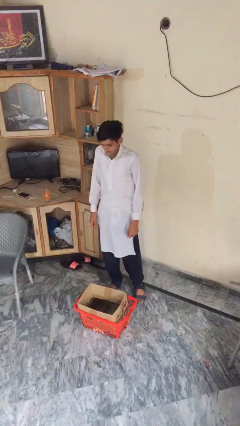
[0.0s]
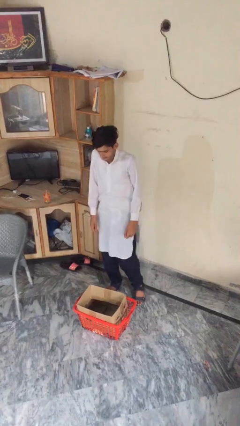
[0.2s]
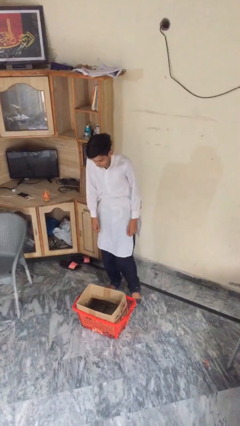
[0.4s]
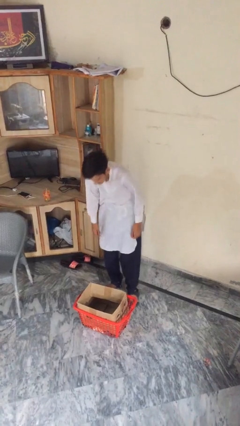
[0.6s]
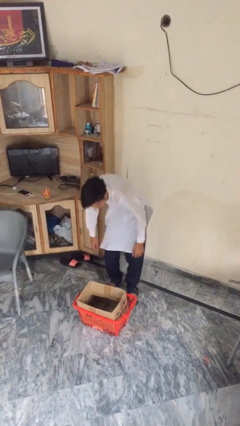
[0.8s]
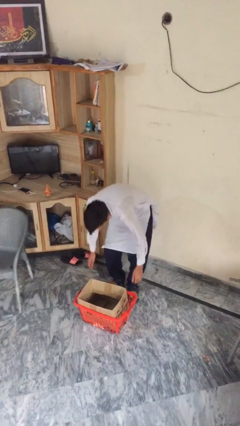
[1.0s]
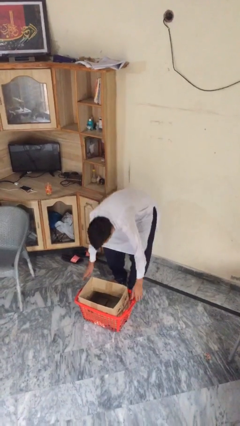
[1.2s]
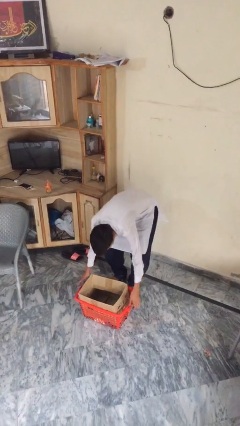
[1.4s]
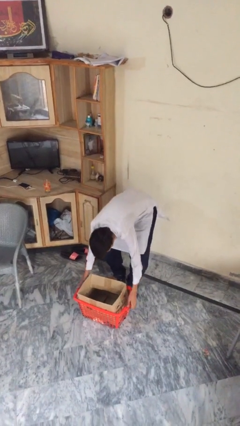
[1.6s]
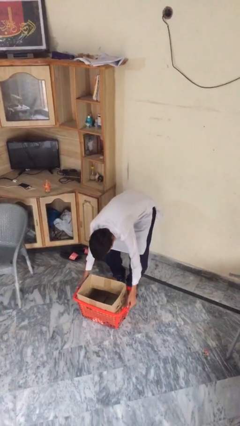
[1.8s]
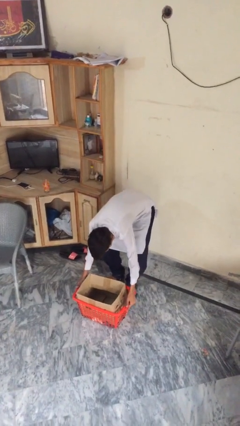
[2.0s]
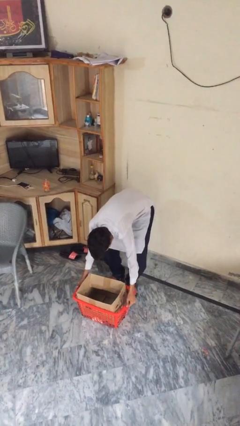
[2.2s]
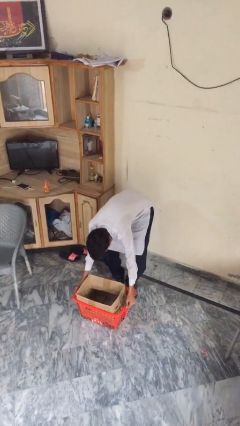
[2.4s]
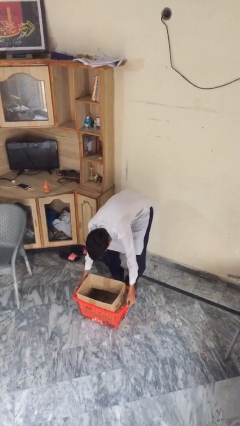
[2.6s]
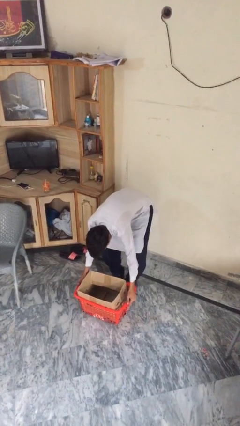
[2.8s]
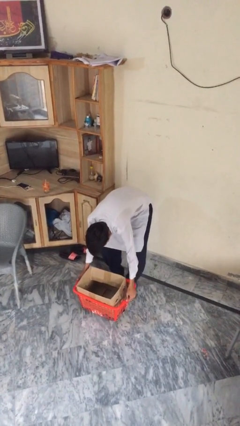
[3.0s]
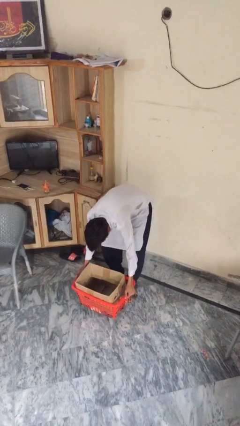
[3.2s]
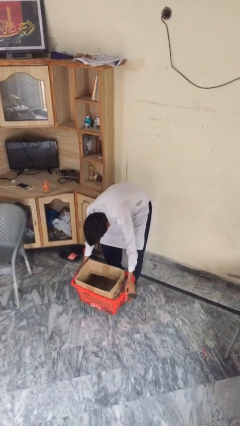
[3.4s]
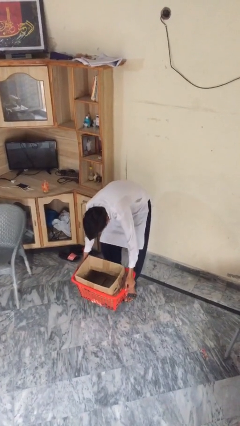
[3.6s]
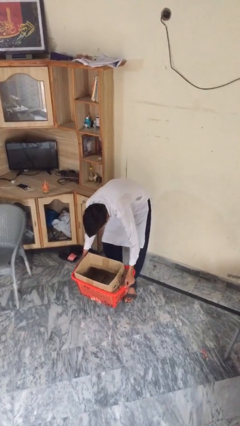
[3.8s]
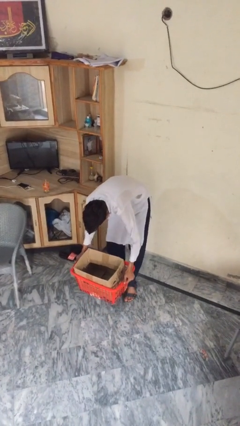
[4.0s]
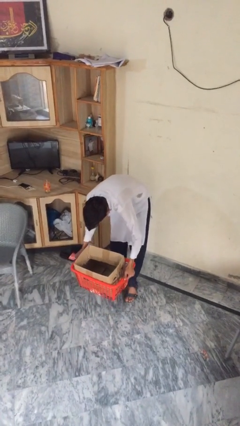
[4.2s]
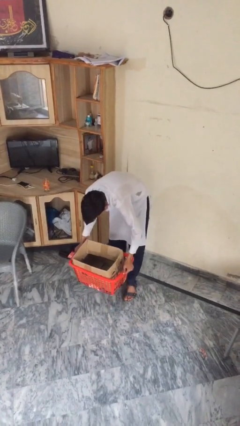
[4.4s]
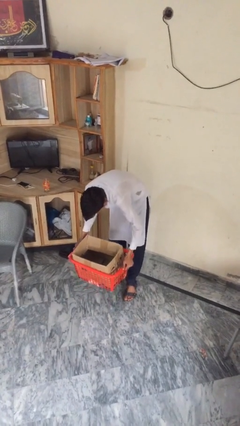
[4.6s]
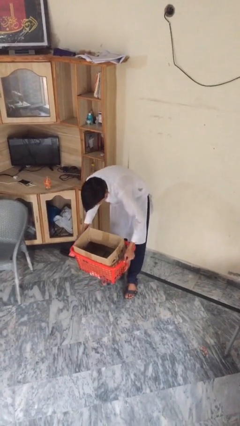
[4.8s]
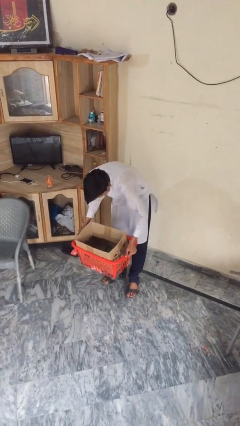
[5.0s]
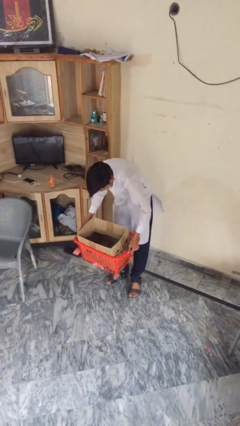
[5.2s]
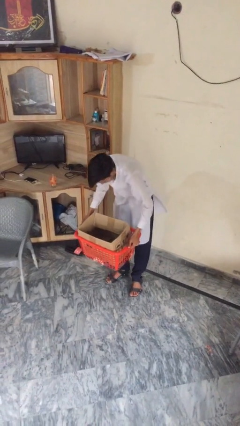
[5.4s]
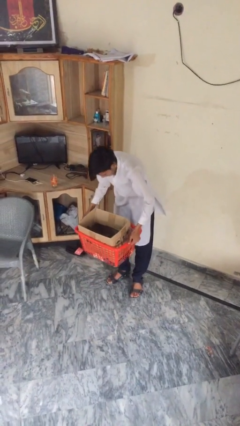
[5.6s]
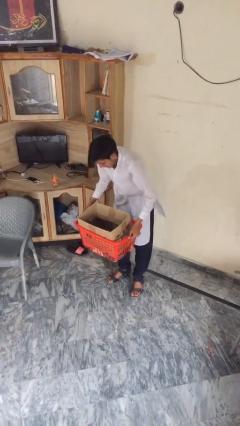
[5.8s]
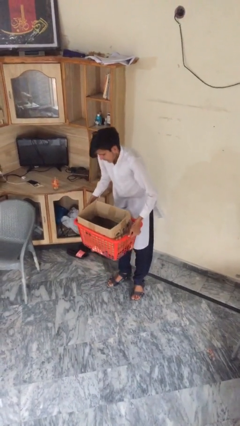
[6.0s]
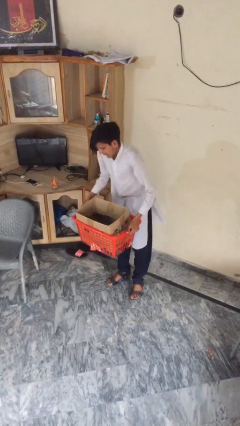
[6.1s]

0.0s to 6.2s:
person picks up object from floor

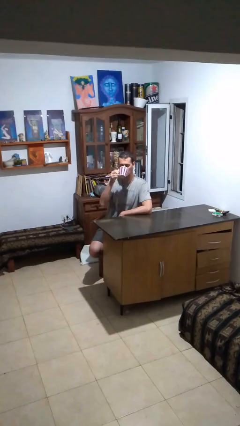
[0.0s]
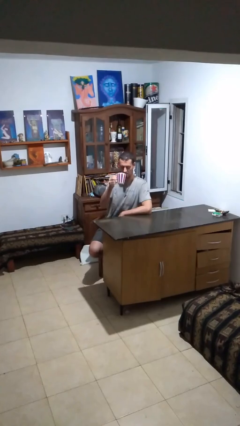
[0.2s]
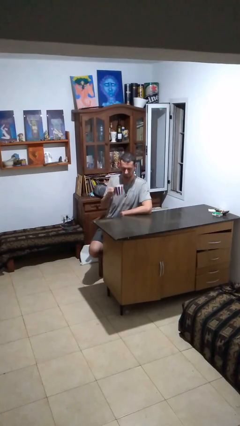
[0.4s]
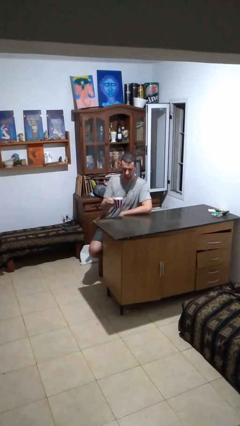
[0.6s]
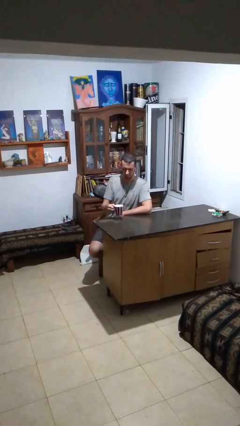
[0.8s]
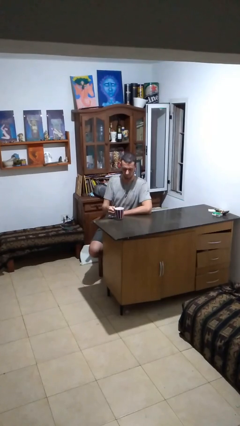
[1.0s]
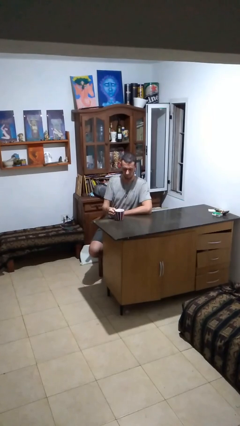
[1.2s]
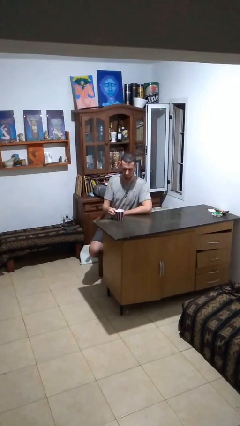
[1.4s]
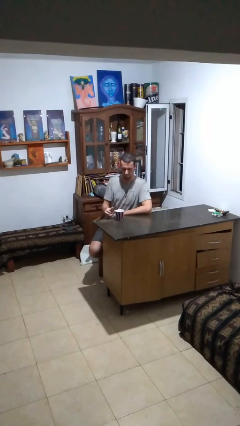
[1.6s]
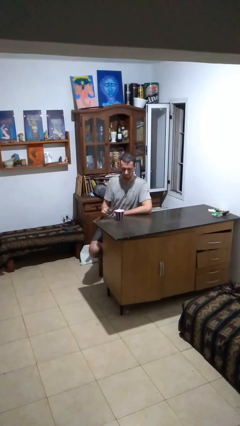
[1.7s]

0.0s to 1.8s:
person puts down object on table

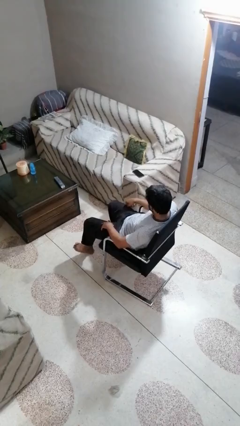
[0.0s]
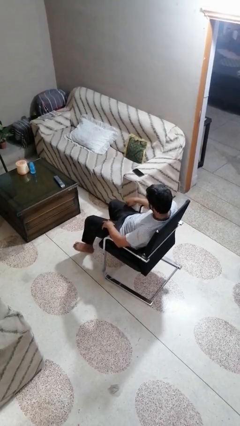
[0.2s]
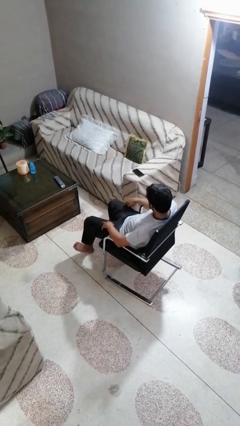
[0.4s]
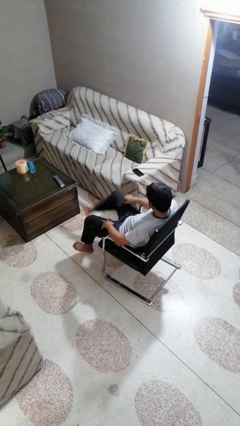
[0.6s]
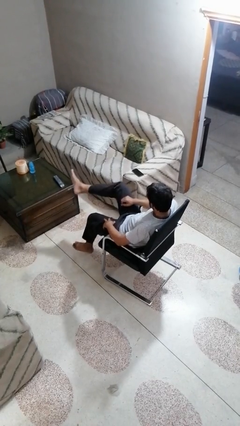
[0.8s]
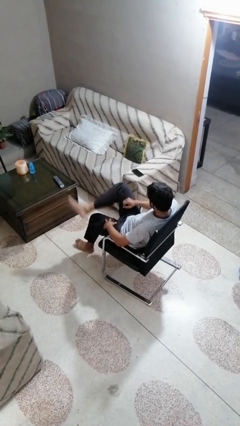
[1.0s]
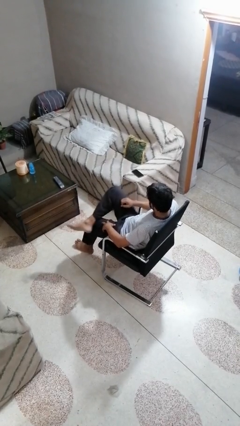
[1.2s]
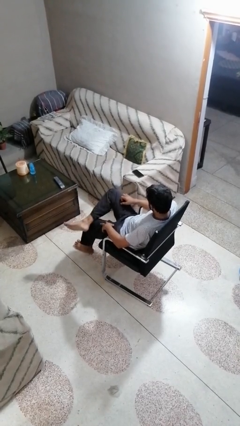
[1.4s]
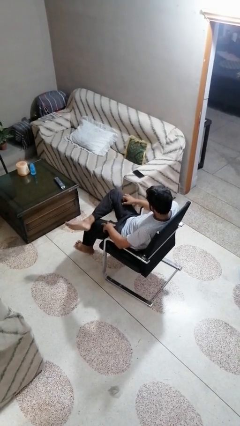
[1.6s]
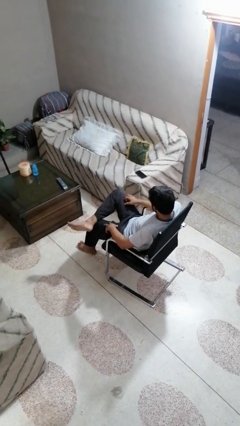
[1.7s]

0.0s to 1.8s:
person crosses legs

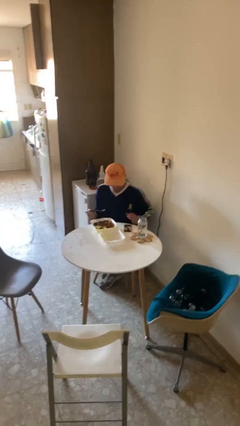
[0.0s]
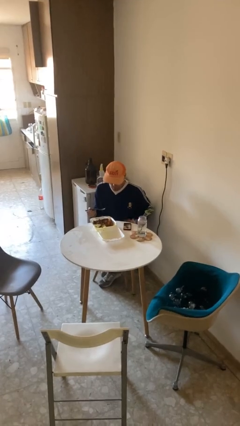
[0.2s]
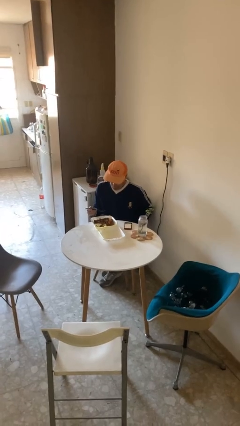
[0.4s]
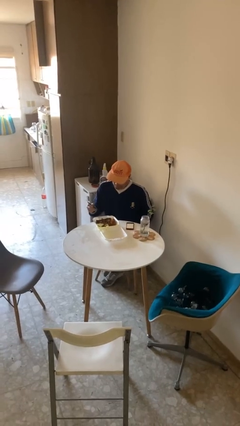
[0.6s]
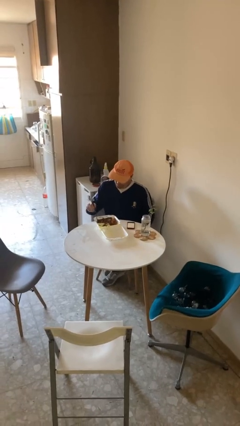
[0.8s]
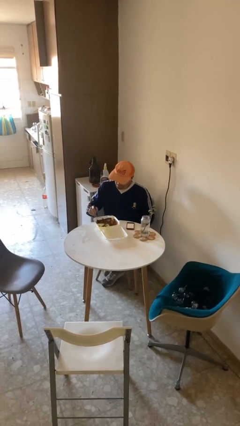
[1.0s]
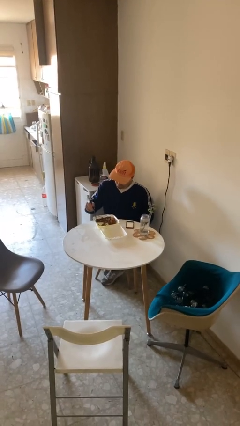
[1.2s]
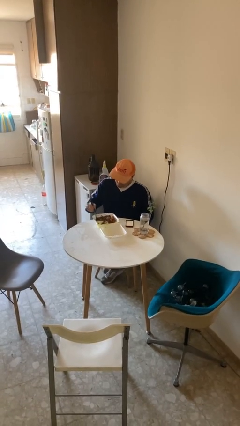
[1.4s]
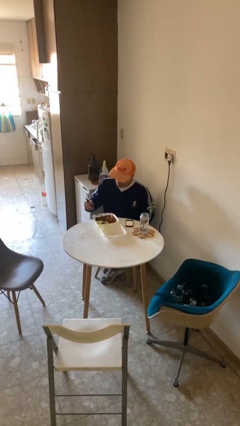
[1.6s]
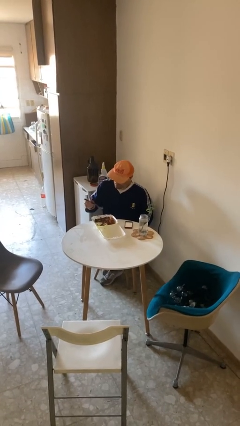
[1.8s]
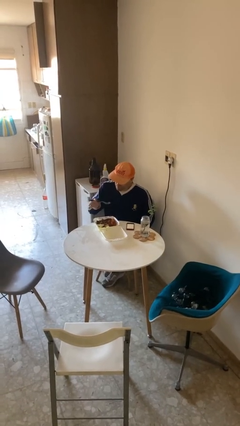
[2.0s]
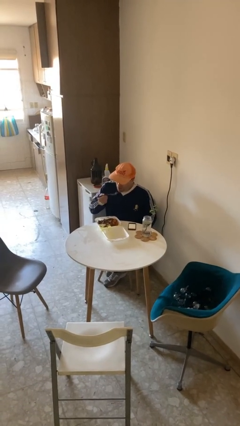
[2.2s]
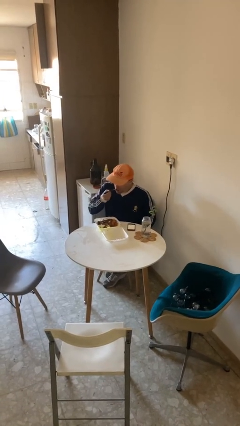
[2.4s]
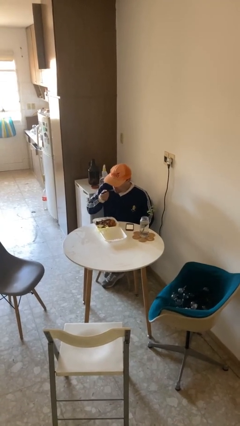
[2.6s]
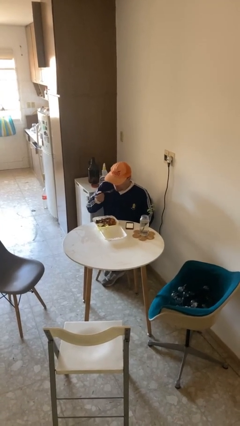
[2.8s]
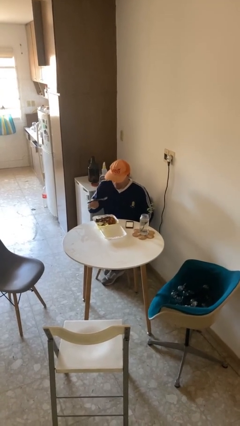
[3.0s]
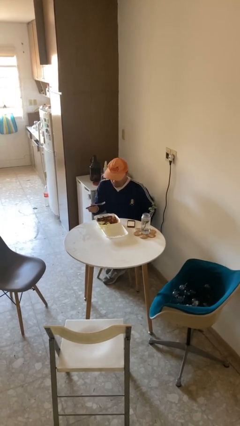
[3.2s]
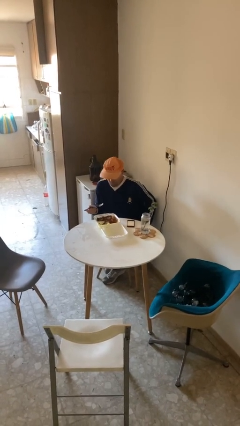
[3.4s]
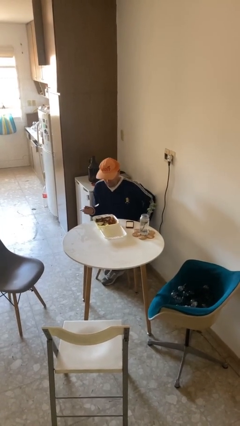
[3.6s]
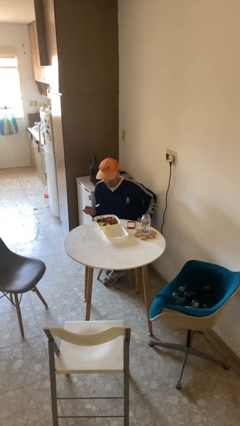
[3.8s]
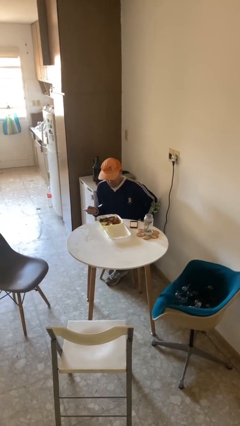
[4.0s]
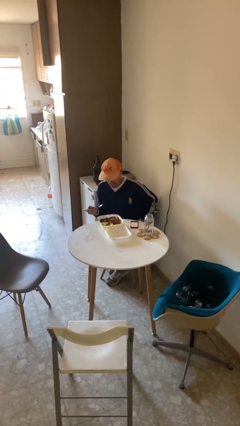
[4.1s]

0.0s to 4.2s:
person eats with utensil

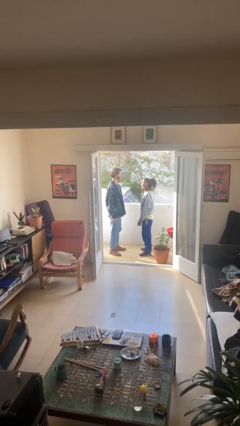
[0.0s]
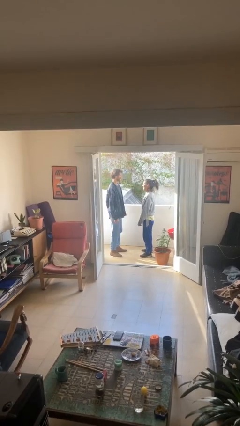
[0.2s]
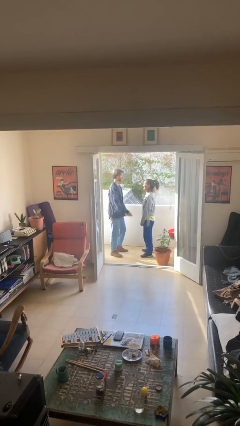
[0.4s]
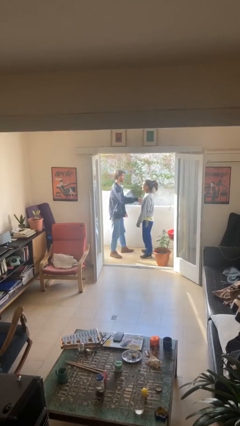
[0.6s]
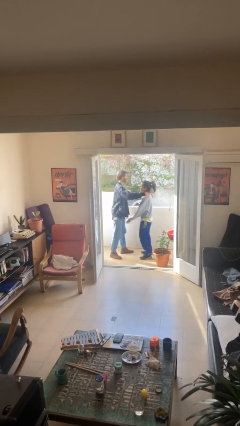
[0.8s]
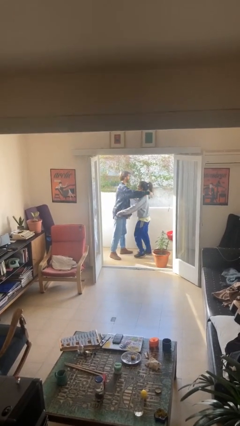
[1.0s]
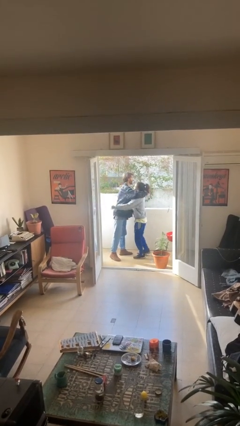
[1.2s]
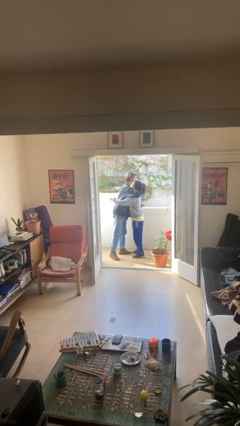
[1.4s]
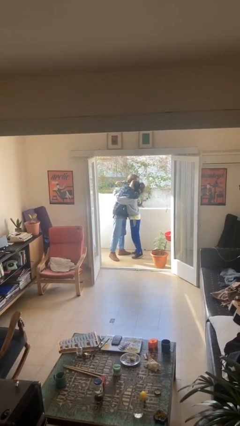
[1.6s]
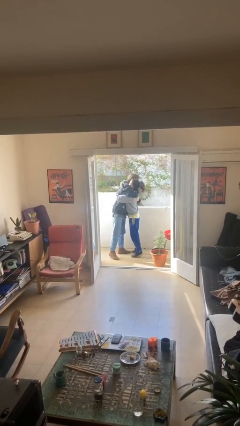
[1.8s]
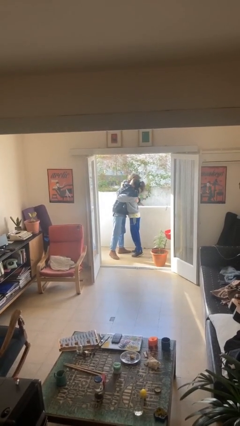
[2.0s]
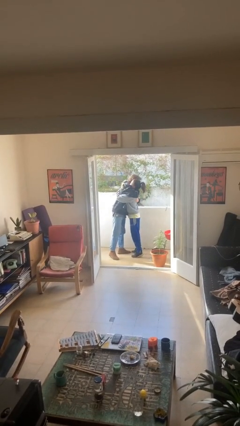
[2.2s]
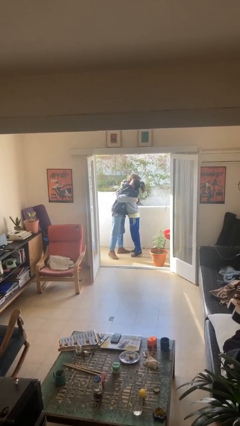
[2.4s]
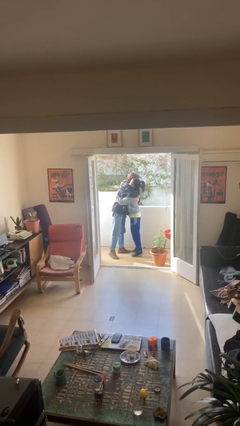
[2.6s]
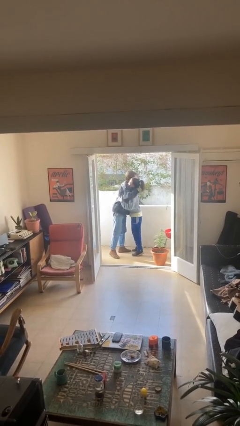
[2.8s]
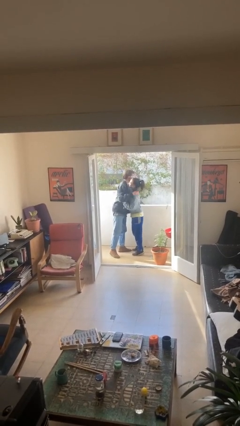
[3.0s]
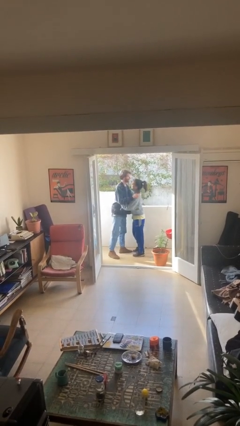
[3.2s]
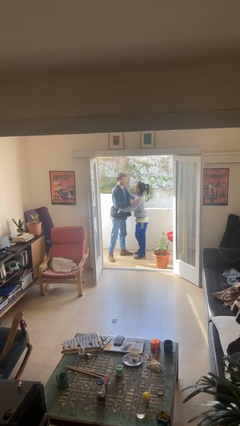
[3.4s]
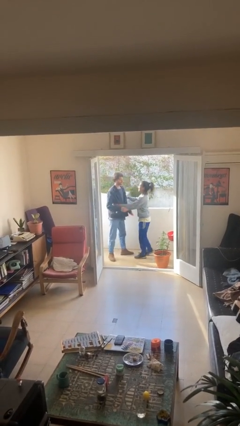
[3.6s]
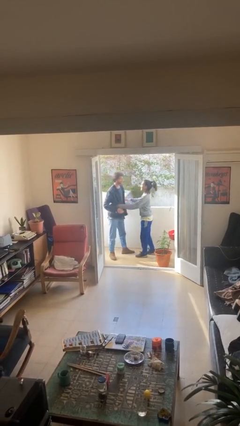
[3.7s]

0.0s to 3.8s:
person embraces person
